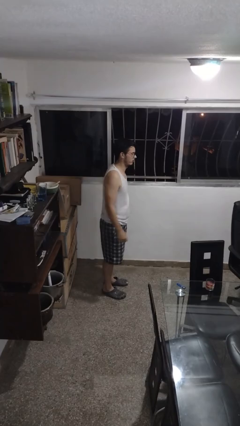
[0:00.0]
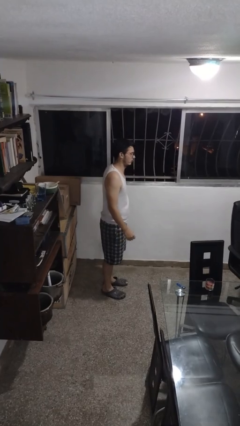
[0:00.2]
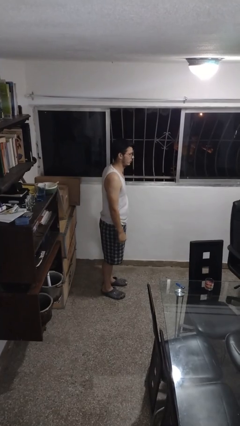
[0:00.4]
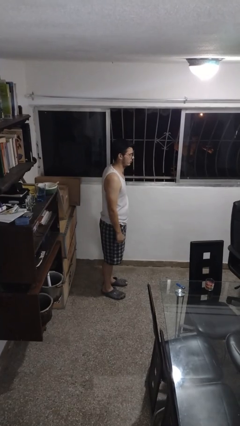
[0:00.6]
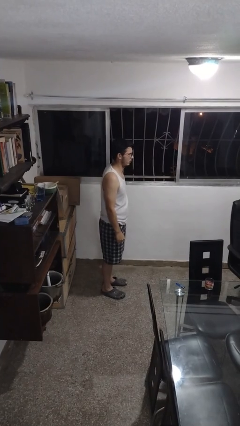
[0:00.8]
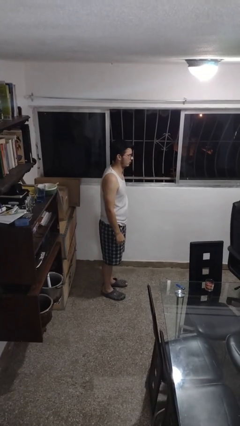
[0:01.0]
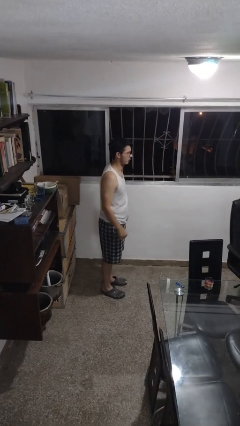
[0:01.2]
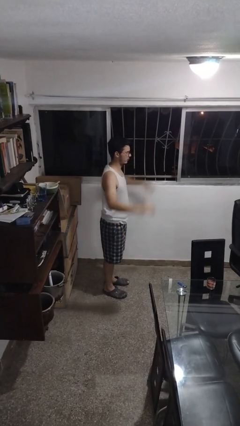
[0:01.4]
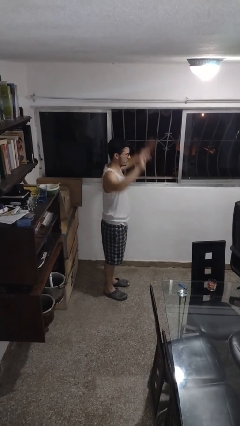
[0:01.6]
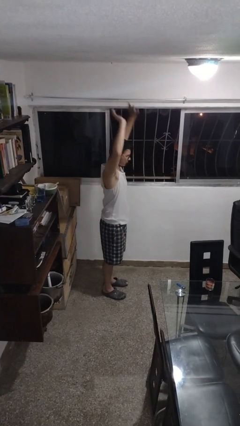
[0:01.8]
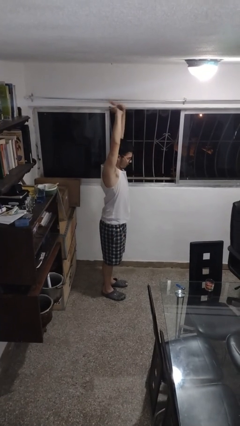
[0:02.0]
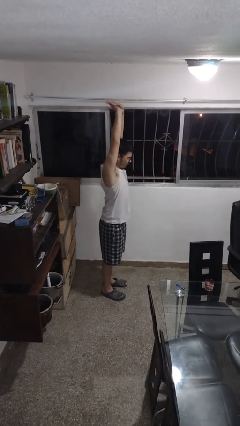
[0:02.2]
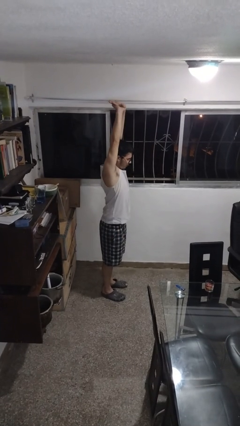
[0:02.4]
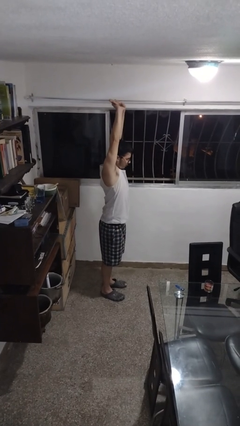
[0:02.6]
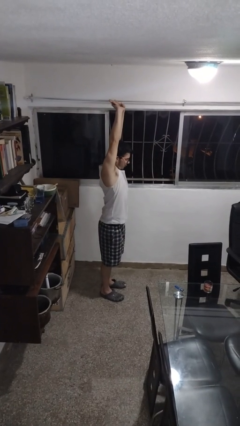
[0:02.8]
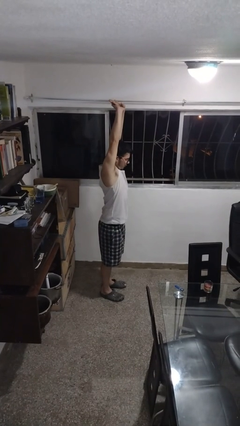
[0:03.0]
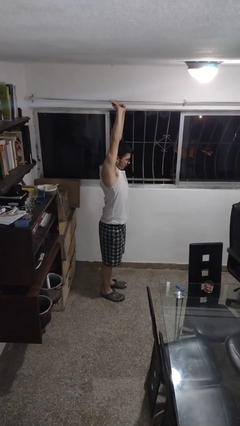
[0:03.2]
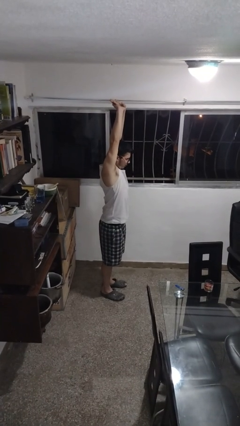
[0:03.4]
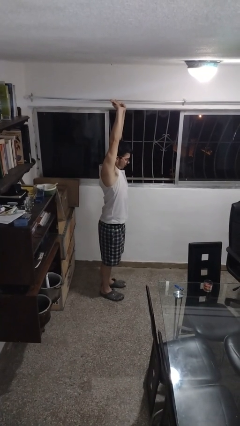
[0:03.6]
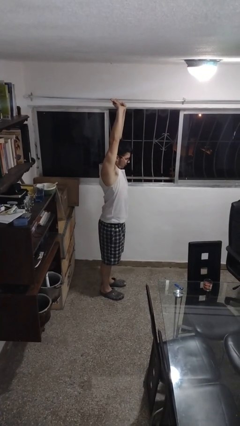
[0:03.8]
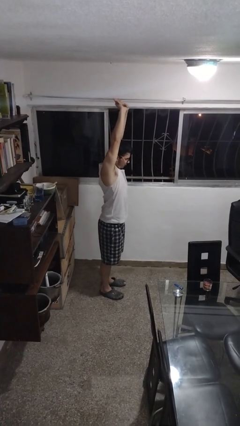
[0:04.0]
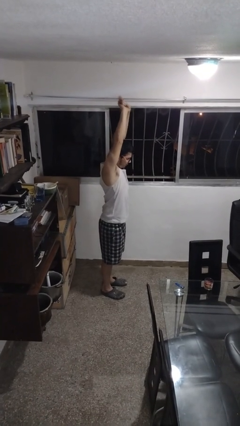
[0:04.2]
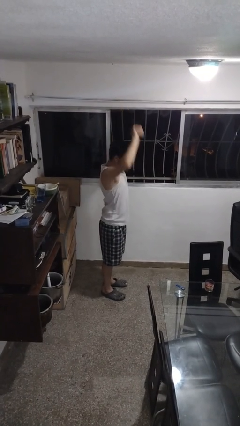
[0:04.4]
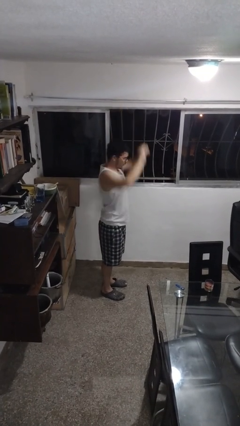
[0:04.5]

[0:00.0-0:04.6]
person stretches arms over head

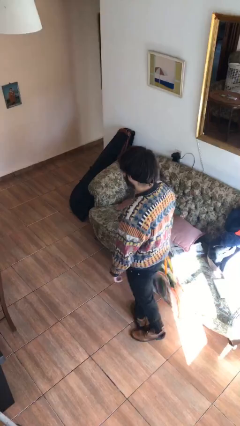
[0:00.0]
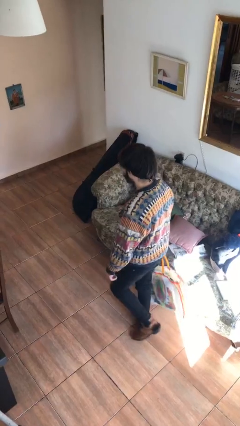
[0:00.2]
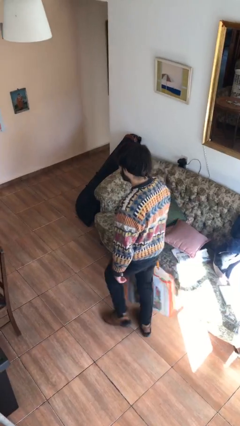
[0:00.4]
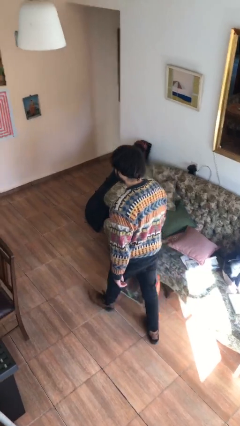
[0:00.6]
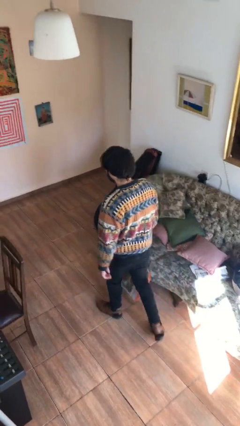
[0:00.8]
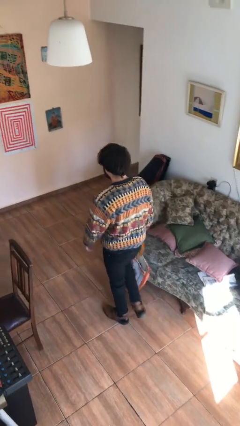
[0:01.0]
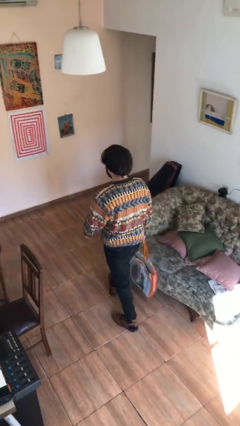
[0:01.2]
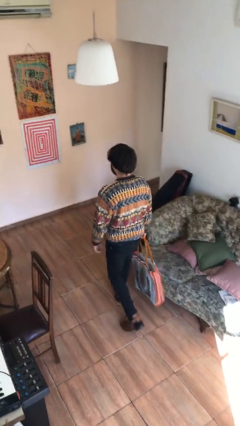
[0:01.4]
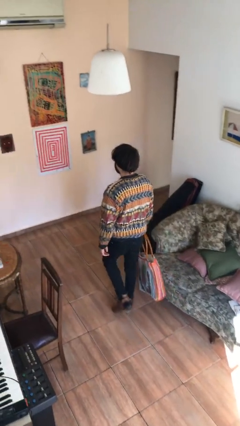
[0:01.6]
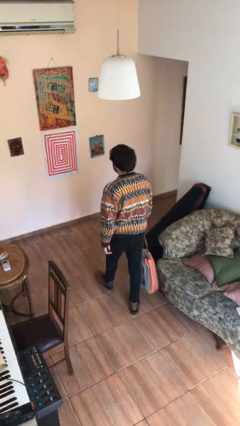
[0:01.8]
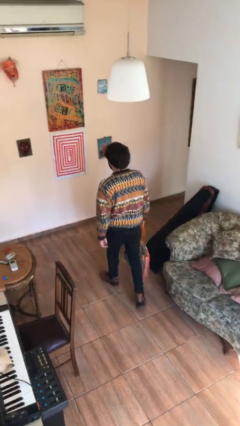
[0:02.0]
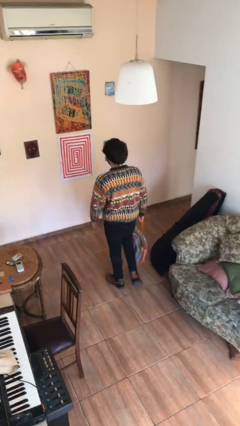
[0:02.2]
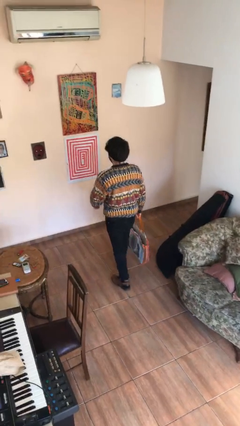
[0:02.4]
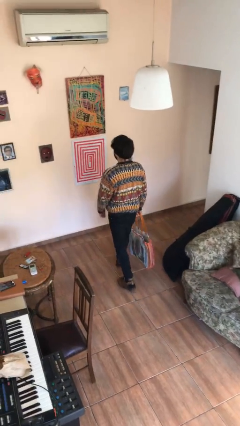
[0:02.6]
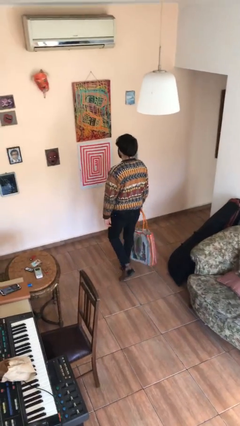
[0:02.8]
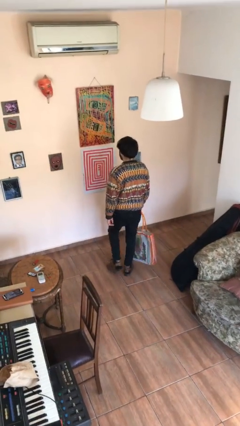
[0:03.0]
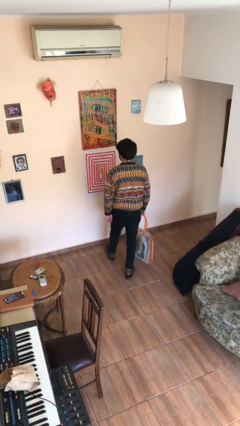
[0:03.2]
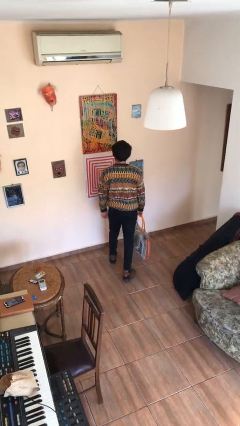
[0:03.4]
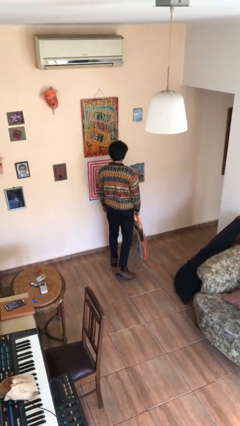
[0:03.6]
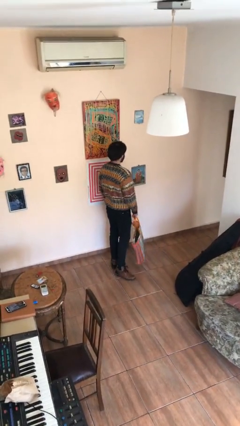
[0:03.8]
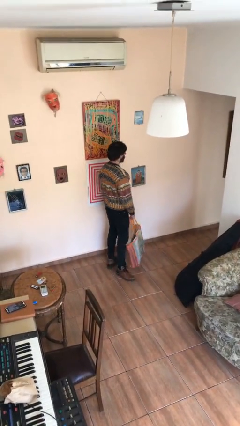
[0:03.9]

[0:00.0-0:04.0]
person carries groceries

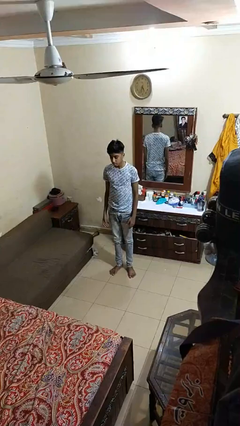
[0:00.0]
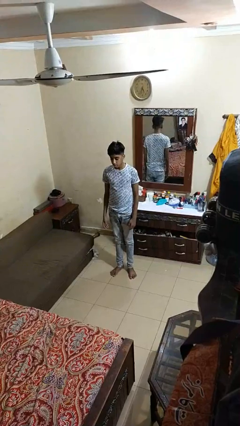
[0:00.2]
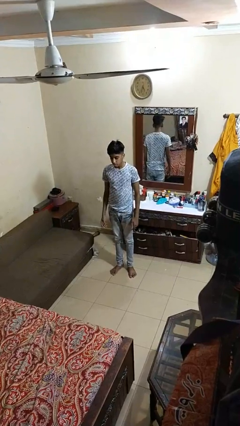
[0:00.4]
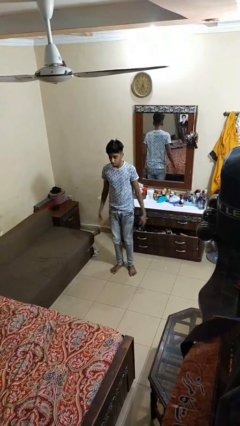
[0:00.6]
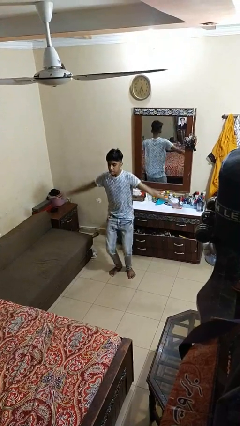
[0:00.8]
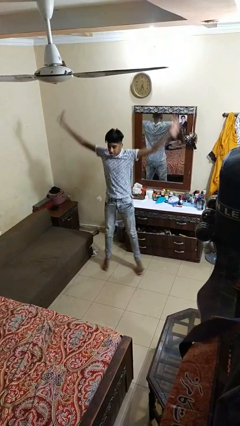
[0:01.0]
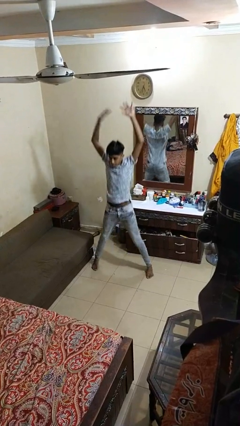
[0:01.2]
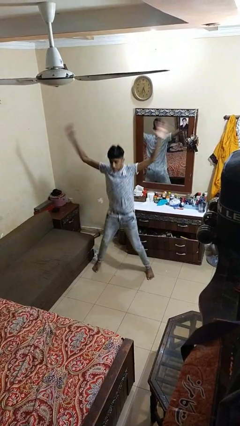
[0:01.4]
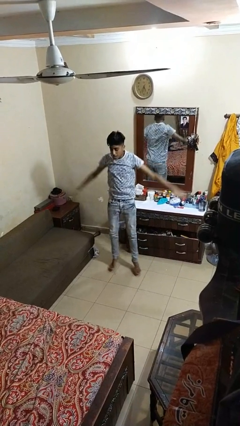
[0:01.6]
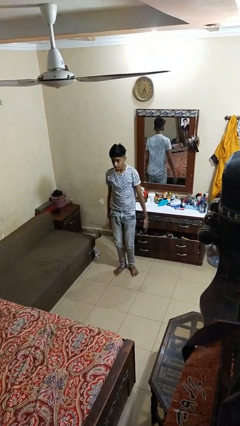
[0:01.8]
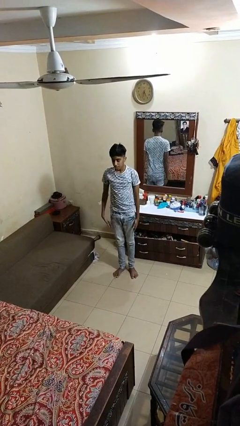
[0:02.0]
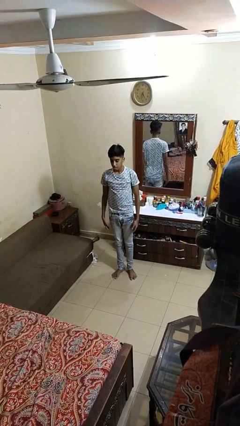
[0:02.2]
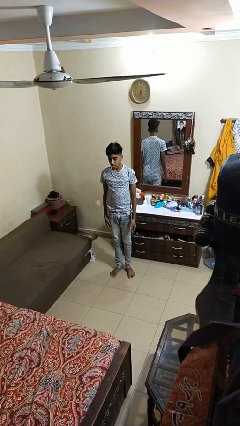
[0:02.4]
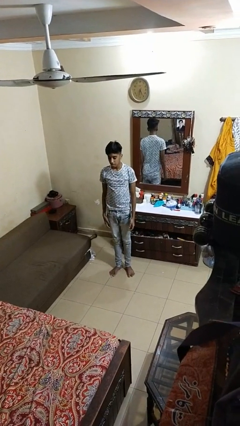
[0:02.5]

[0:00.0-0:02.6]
person exercises with jumping jacks

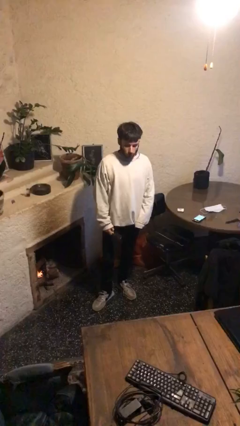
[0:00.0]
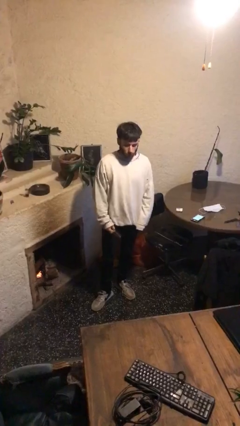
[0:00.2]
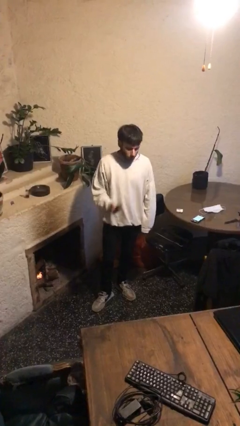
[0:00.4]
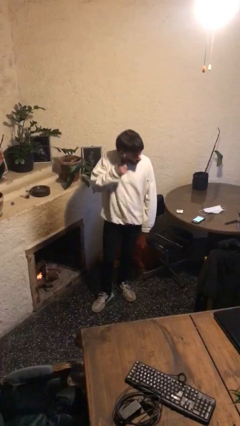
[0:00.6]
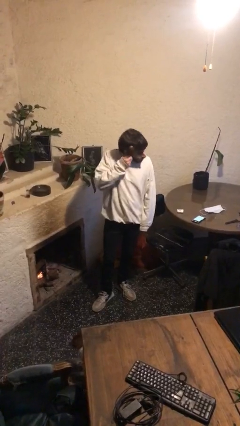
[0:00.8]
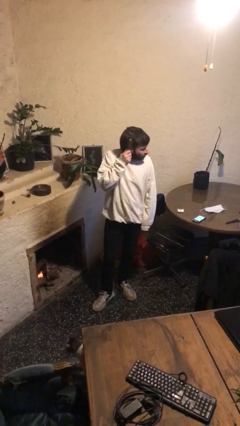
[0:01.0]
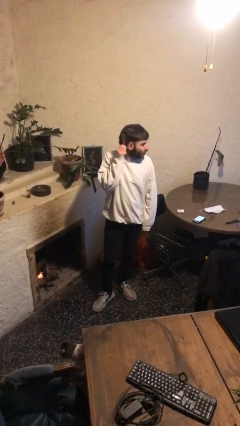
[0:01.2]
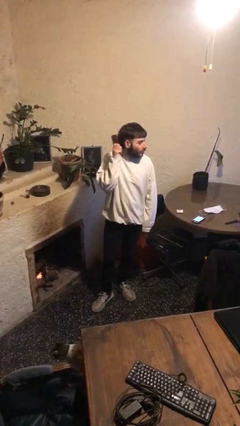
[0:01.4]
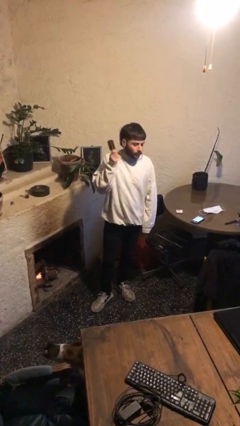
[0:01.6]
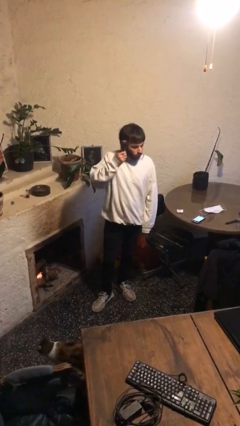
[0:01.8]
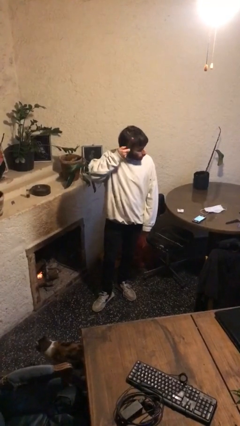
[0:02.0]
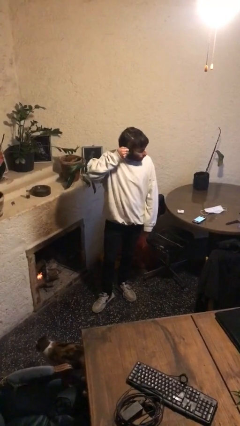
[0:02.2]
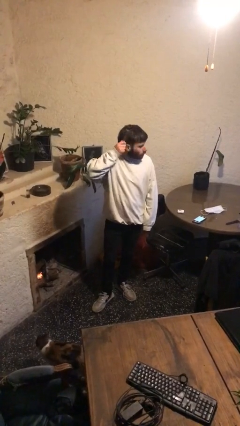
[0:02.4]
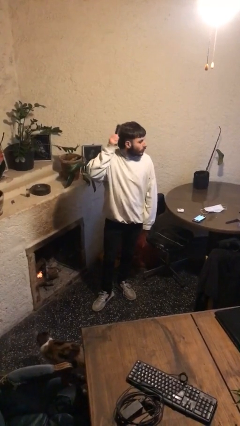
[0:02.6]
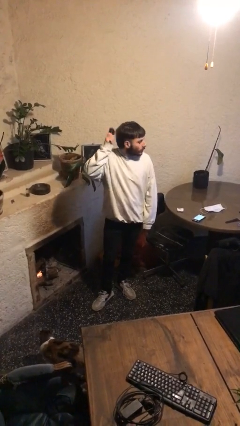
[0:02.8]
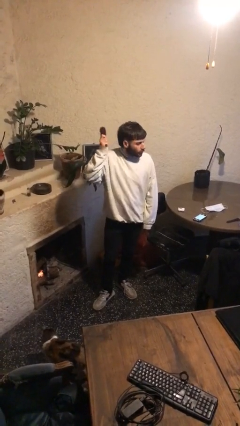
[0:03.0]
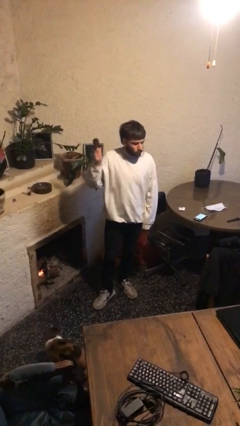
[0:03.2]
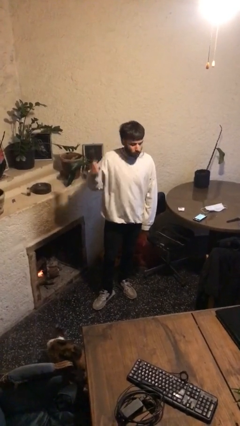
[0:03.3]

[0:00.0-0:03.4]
person brushes hair

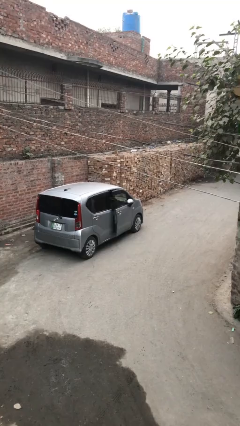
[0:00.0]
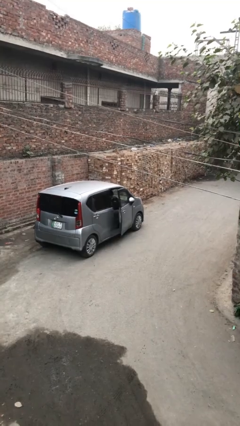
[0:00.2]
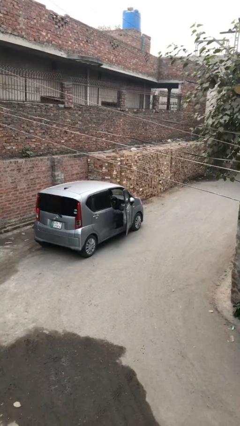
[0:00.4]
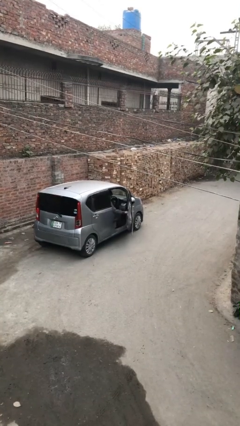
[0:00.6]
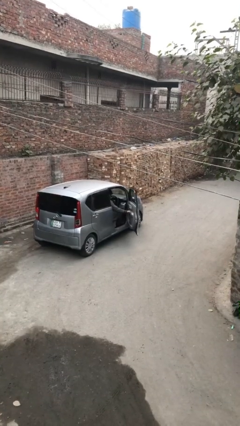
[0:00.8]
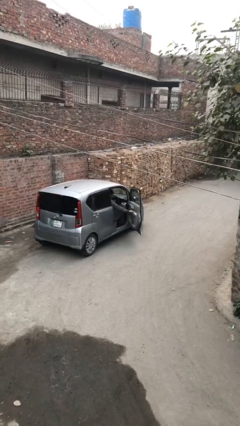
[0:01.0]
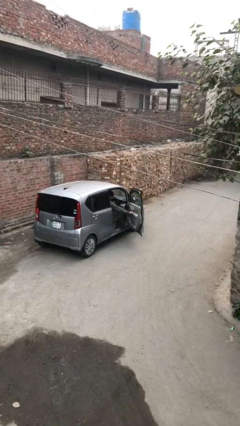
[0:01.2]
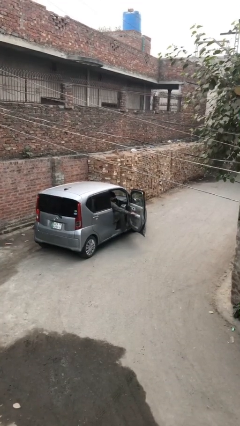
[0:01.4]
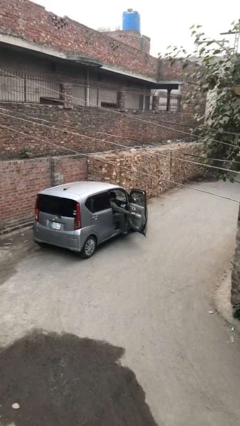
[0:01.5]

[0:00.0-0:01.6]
person opens car door

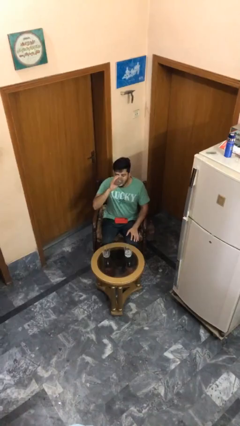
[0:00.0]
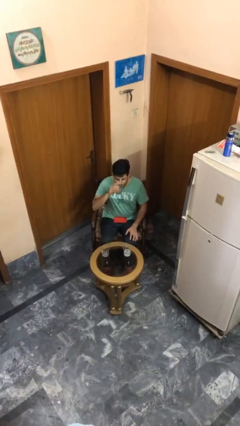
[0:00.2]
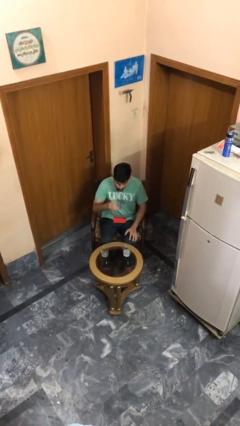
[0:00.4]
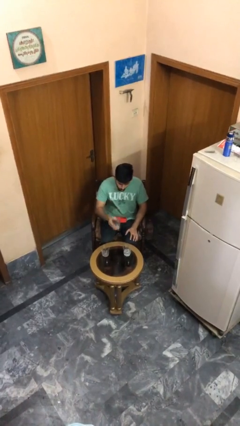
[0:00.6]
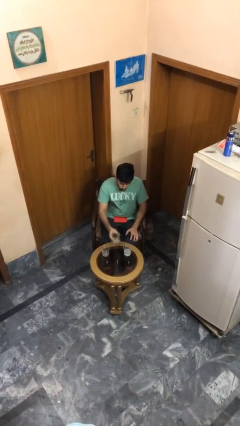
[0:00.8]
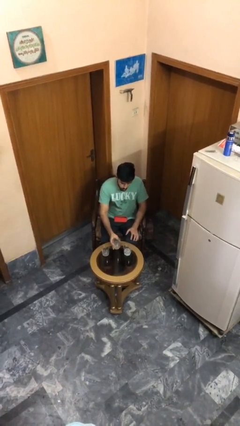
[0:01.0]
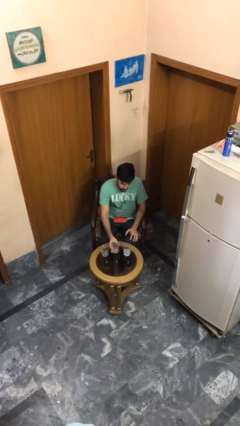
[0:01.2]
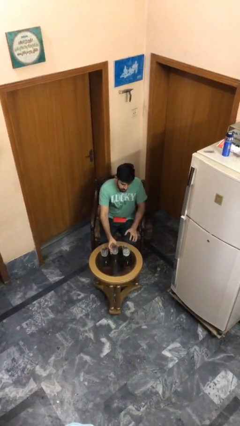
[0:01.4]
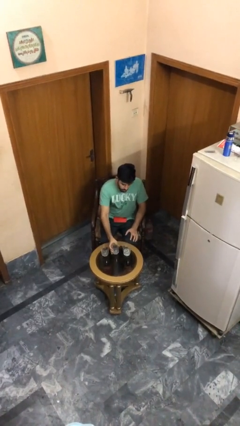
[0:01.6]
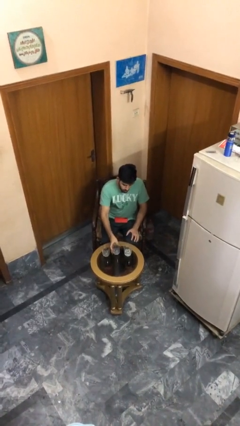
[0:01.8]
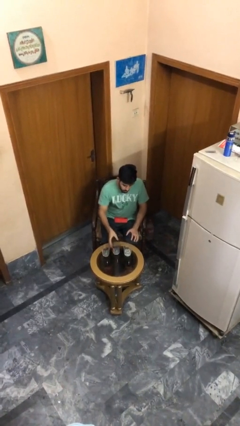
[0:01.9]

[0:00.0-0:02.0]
person puts down object on table
